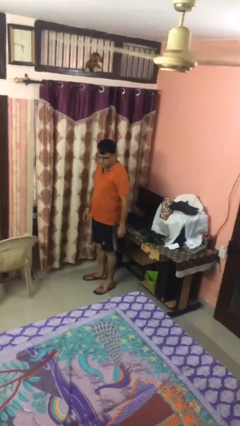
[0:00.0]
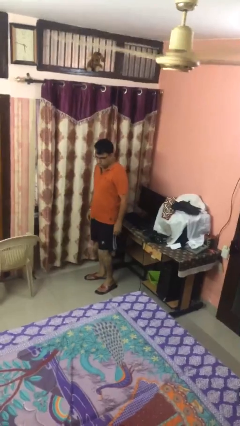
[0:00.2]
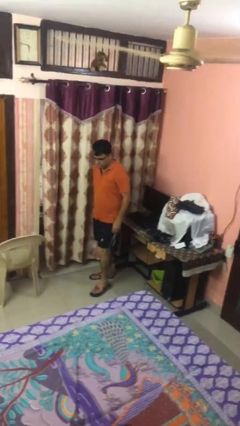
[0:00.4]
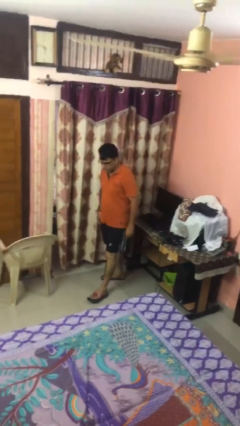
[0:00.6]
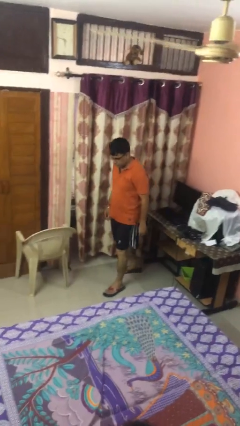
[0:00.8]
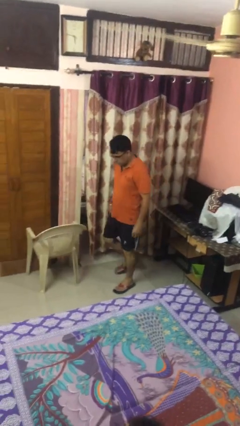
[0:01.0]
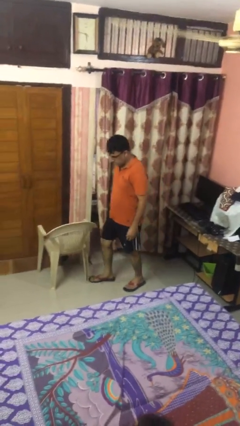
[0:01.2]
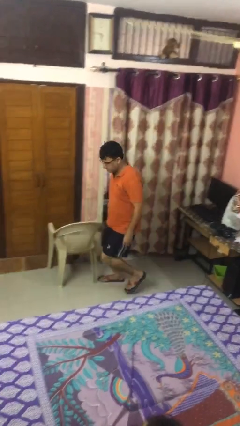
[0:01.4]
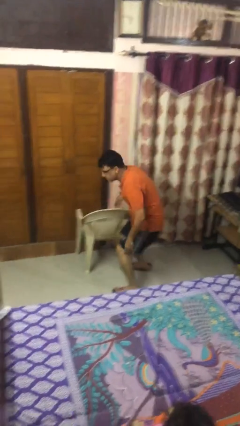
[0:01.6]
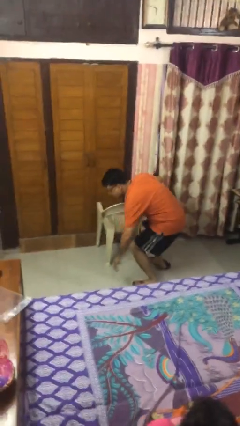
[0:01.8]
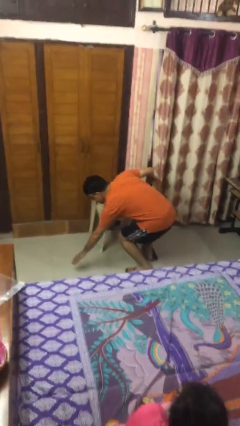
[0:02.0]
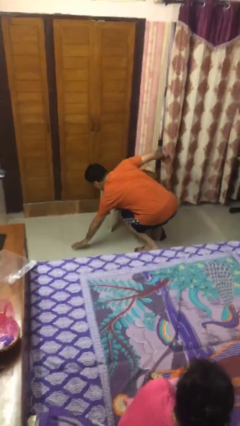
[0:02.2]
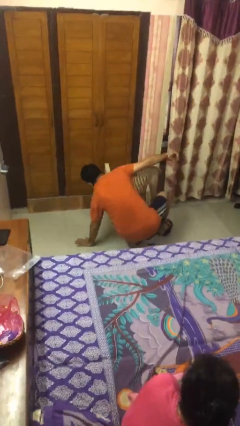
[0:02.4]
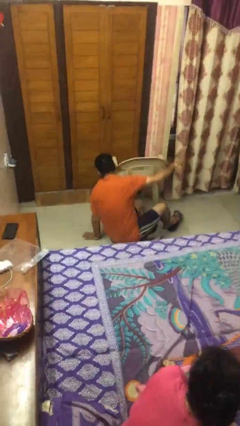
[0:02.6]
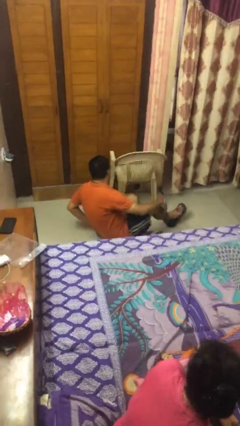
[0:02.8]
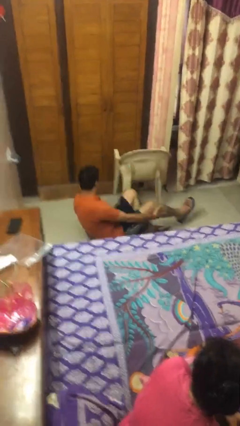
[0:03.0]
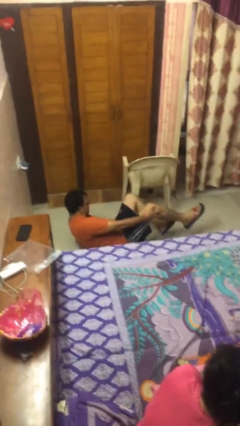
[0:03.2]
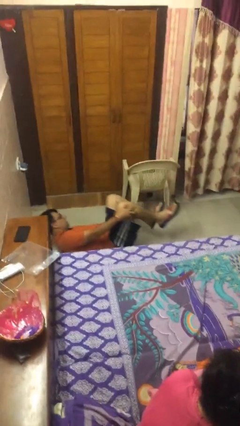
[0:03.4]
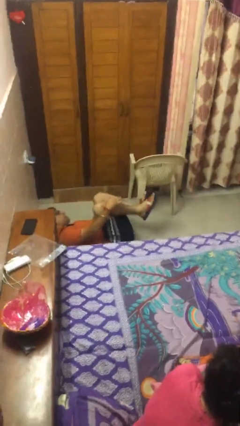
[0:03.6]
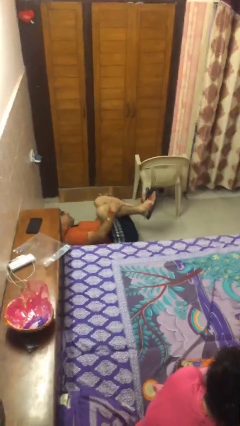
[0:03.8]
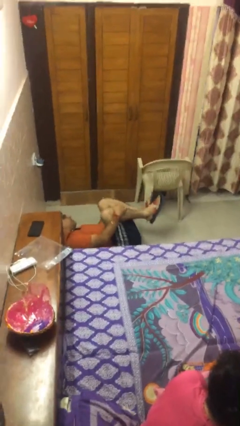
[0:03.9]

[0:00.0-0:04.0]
person trips on object on floor

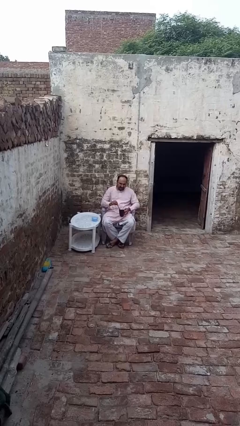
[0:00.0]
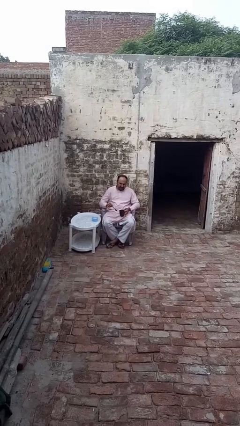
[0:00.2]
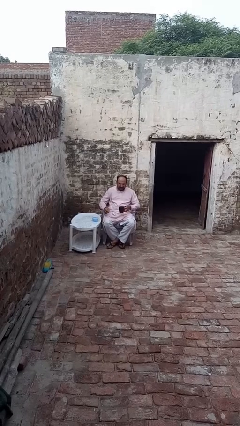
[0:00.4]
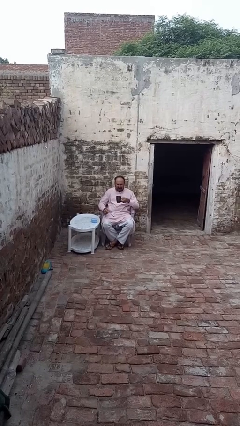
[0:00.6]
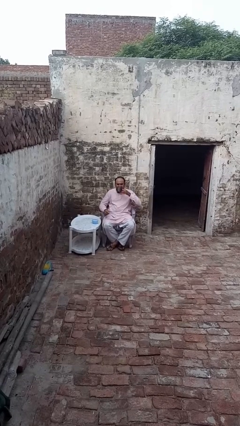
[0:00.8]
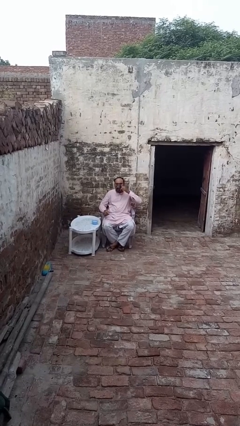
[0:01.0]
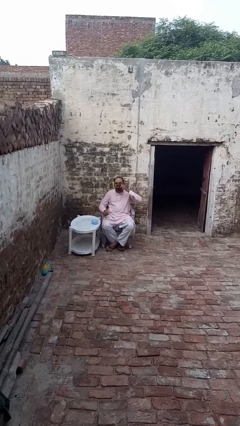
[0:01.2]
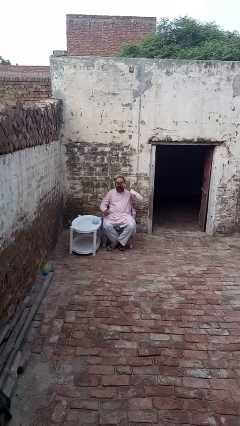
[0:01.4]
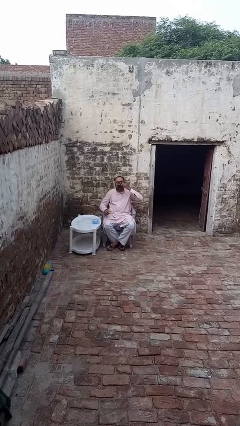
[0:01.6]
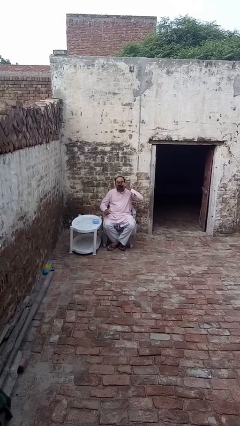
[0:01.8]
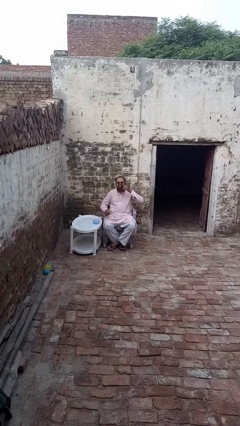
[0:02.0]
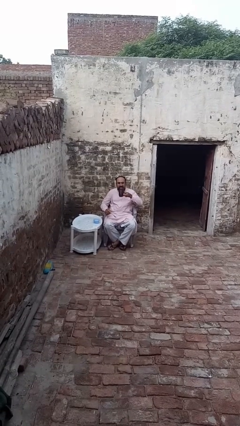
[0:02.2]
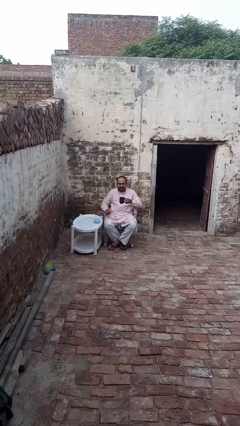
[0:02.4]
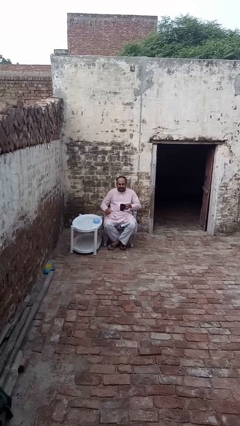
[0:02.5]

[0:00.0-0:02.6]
person drinks from mug

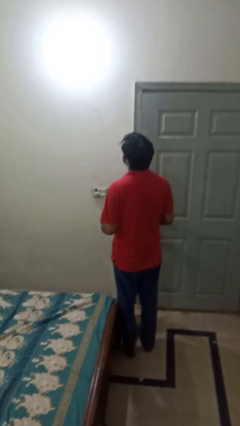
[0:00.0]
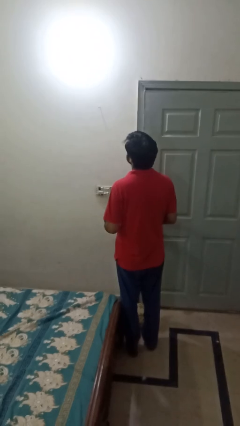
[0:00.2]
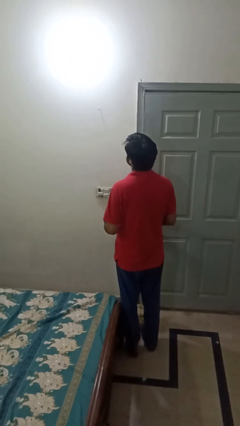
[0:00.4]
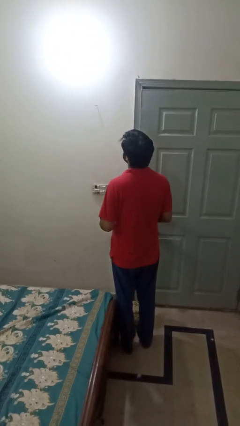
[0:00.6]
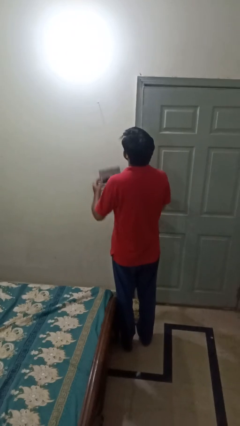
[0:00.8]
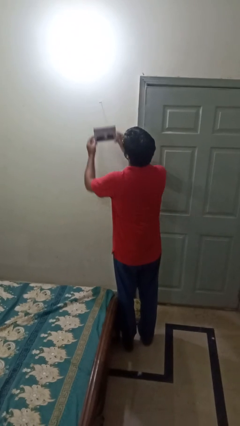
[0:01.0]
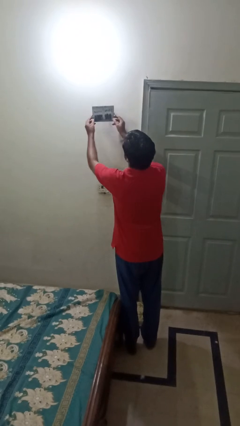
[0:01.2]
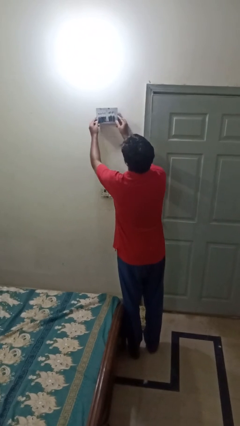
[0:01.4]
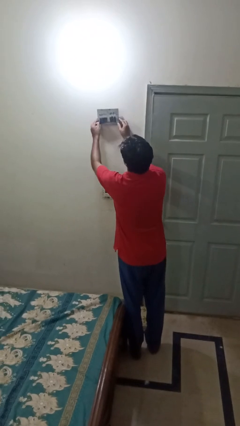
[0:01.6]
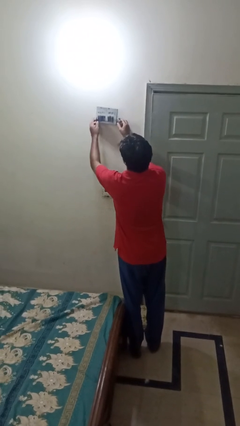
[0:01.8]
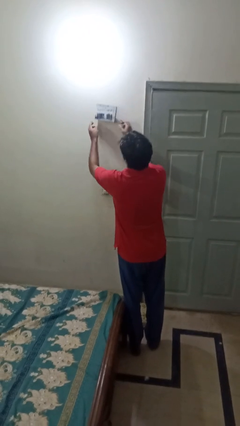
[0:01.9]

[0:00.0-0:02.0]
person puts up picture frame

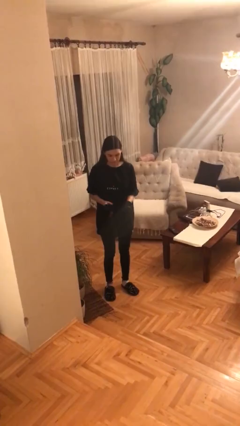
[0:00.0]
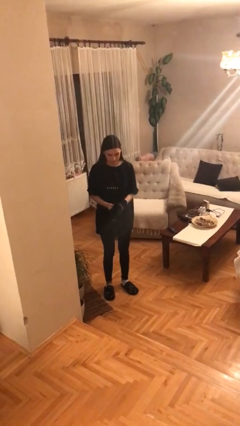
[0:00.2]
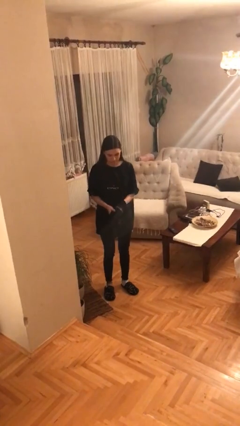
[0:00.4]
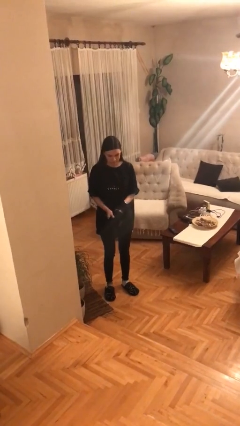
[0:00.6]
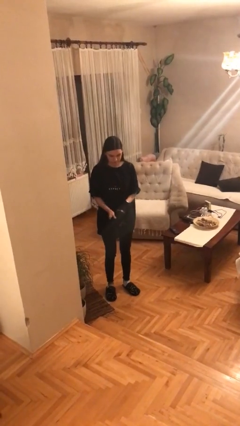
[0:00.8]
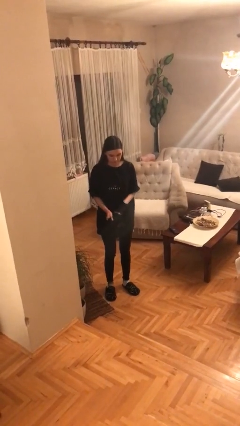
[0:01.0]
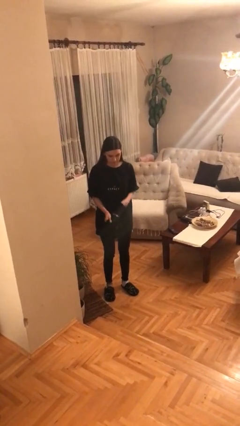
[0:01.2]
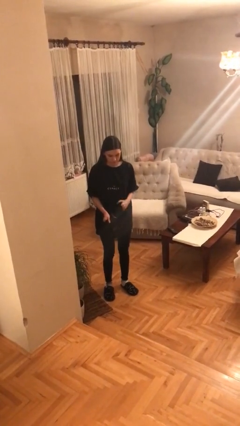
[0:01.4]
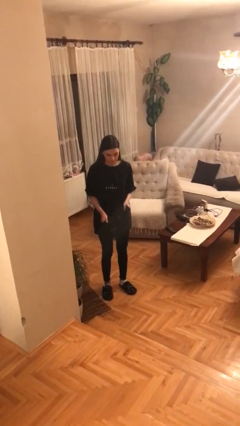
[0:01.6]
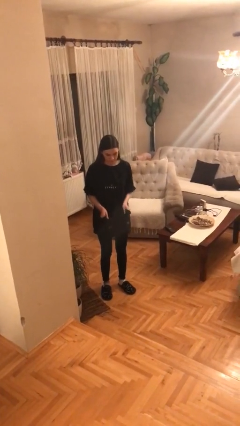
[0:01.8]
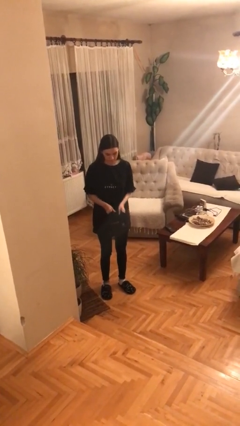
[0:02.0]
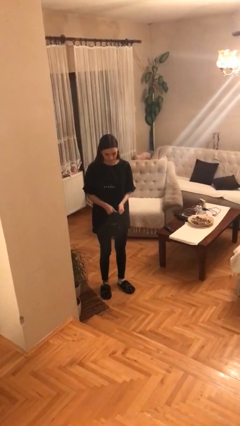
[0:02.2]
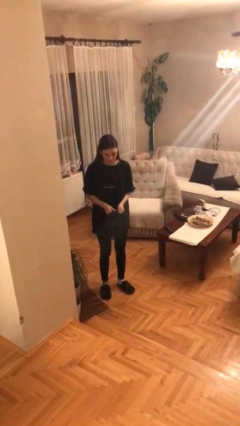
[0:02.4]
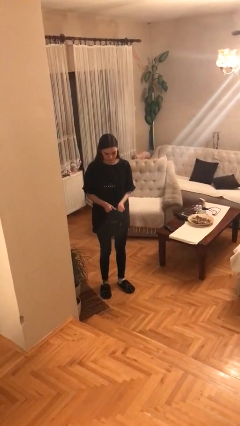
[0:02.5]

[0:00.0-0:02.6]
person takes off gloves

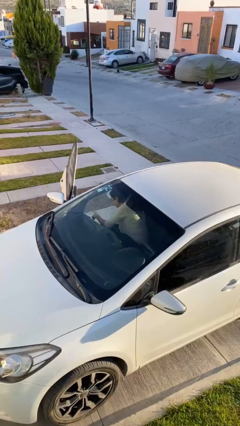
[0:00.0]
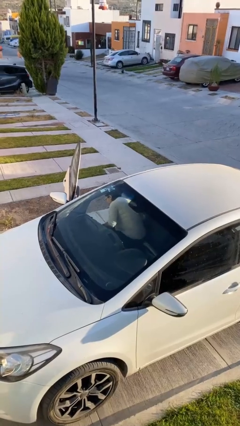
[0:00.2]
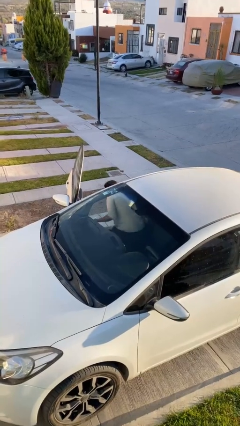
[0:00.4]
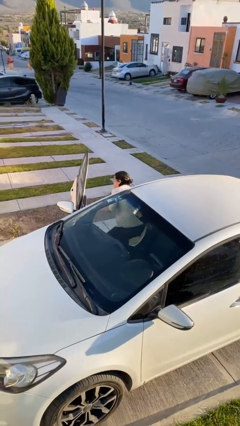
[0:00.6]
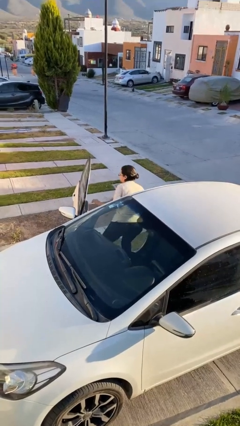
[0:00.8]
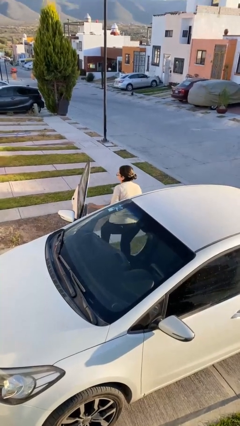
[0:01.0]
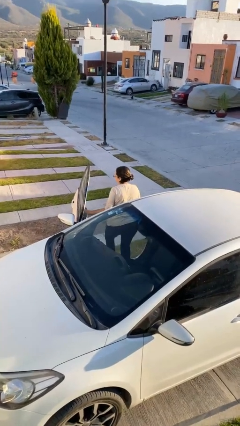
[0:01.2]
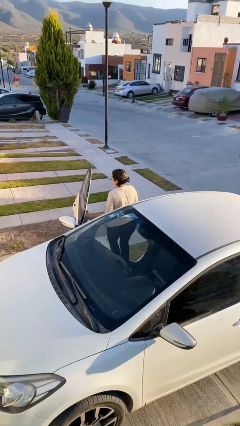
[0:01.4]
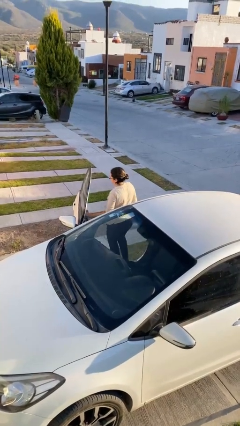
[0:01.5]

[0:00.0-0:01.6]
person exits car

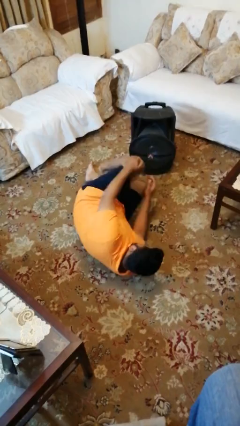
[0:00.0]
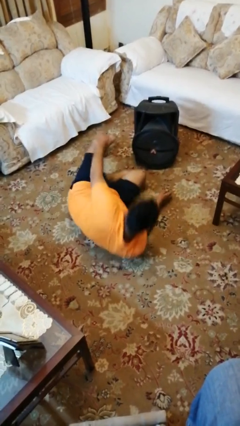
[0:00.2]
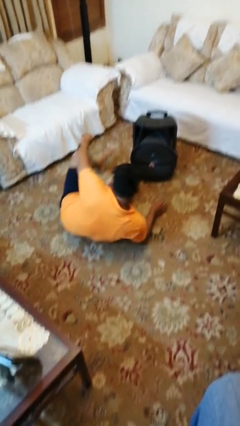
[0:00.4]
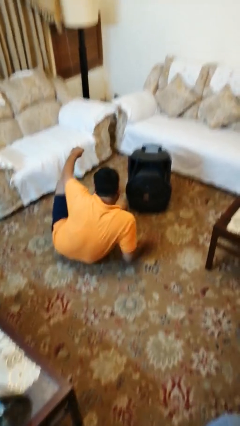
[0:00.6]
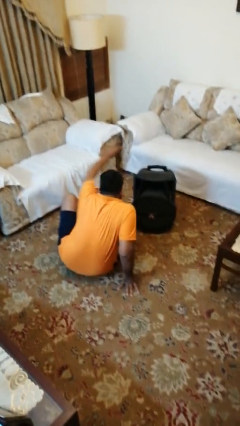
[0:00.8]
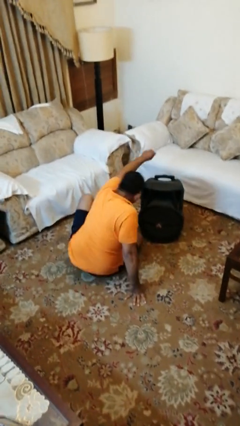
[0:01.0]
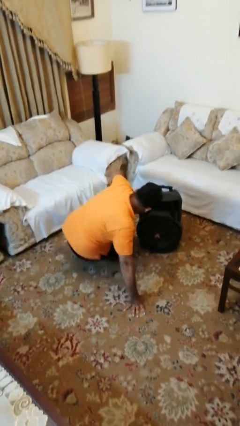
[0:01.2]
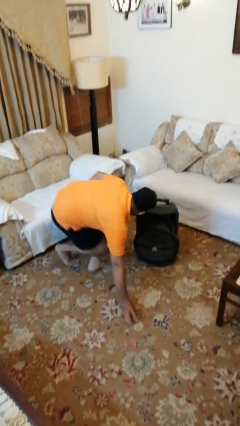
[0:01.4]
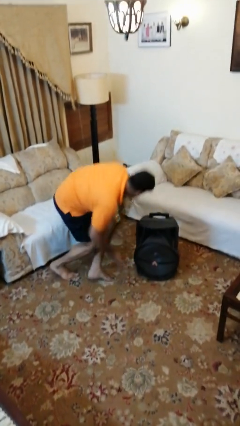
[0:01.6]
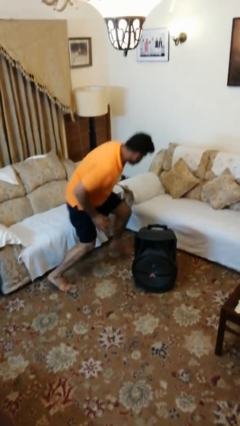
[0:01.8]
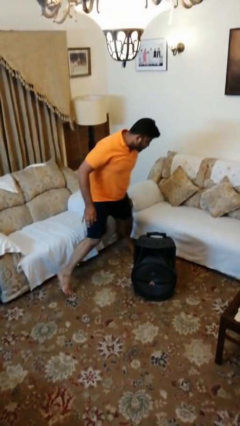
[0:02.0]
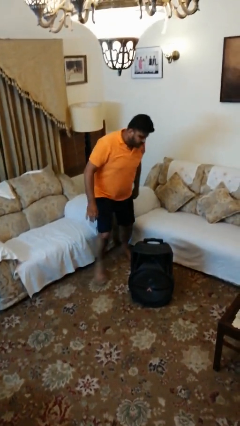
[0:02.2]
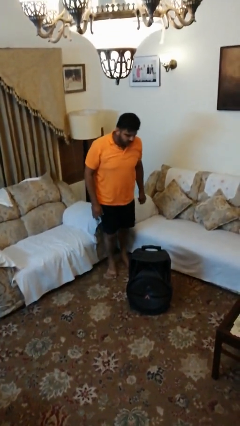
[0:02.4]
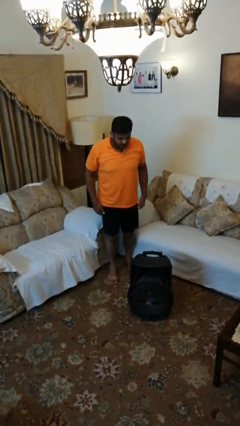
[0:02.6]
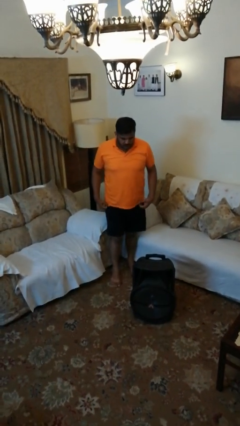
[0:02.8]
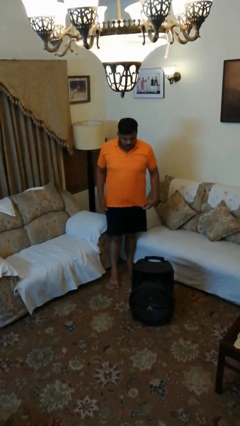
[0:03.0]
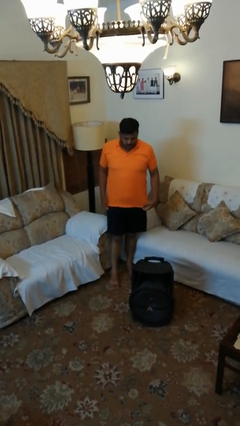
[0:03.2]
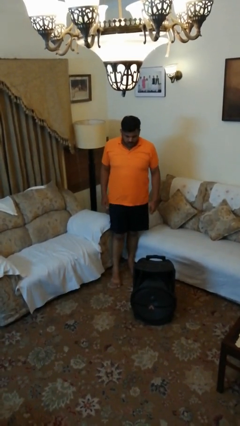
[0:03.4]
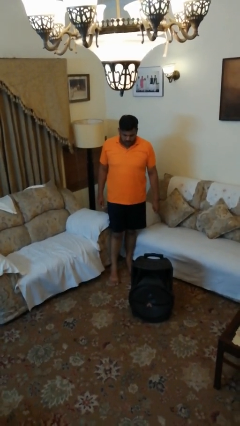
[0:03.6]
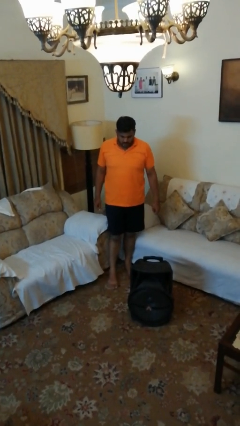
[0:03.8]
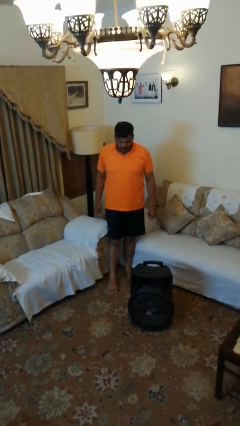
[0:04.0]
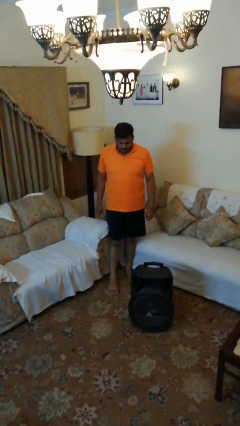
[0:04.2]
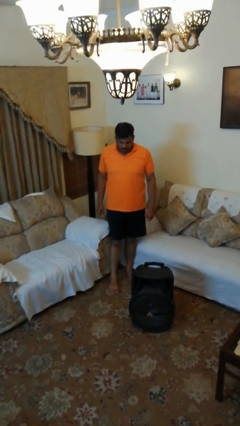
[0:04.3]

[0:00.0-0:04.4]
person stands up from floor

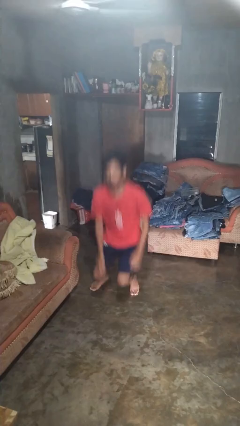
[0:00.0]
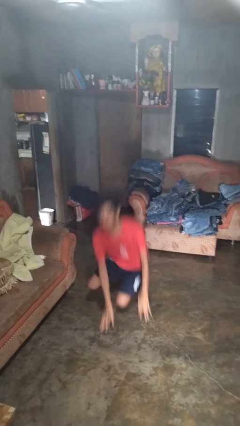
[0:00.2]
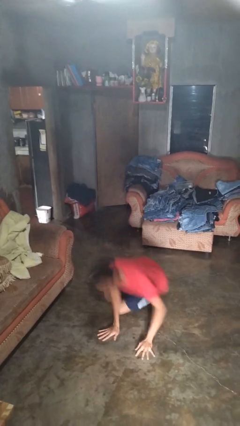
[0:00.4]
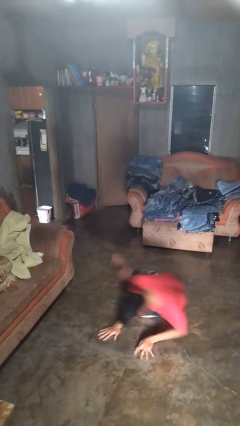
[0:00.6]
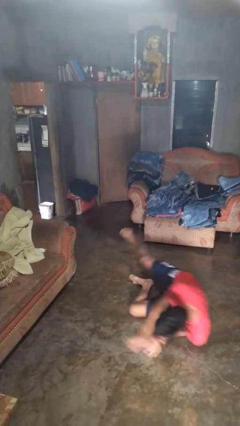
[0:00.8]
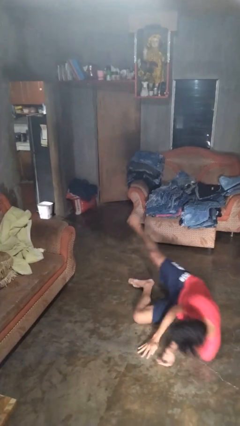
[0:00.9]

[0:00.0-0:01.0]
person falls while standing
